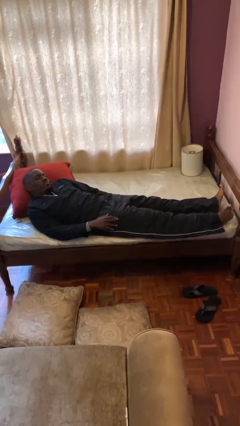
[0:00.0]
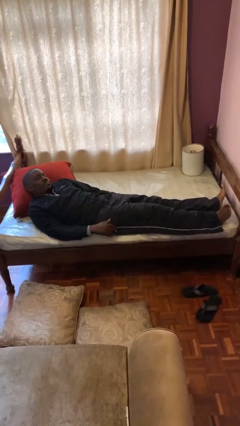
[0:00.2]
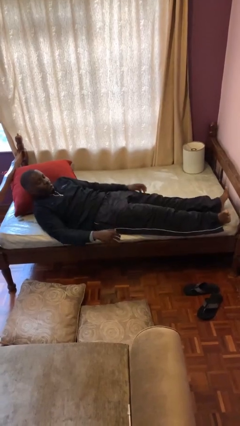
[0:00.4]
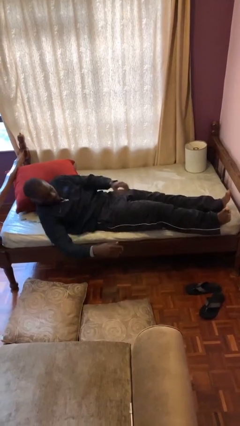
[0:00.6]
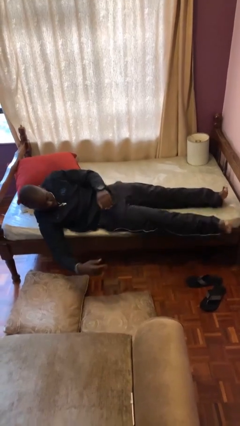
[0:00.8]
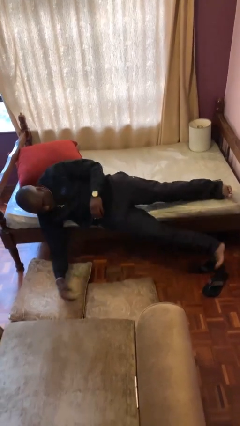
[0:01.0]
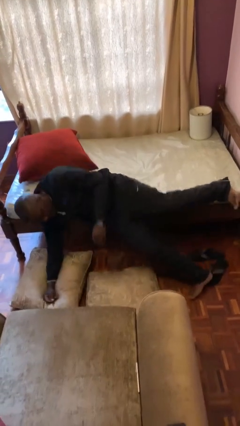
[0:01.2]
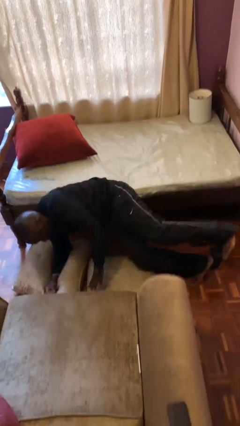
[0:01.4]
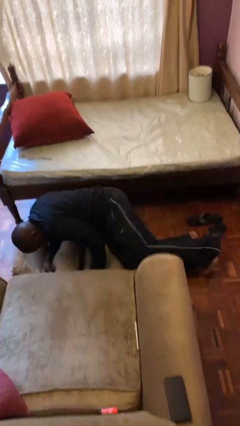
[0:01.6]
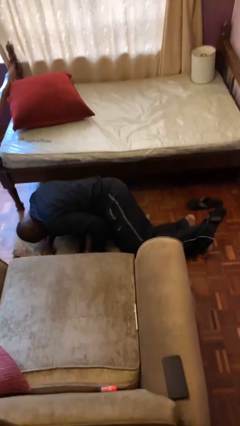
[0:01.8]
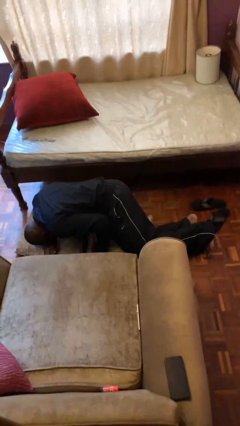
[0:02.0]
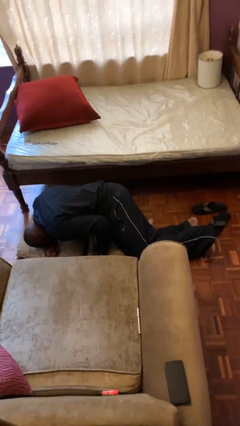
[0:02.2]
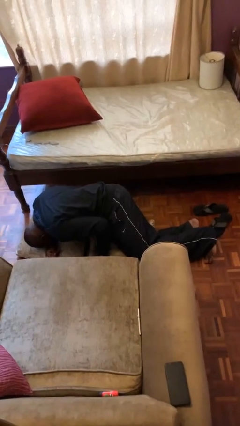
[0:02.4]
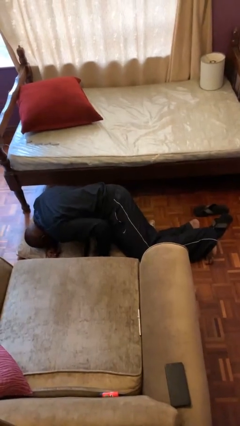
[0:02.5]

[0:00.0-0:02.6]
person falls from bed

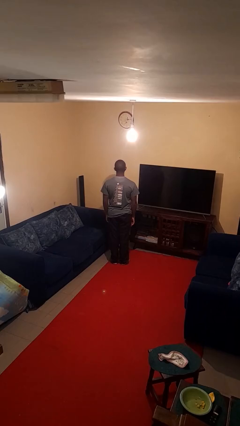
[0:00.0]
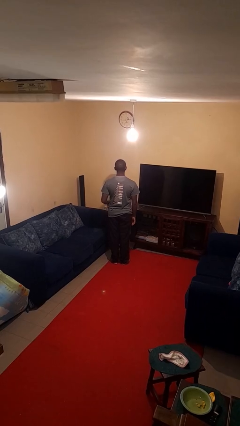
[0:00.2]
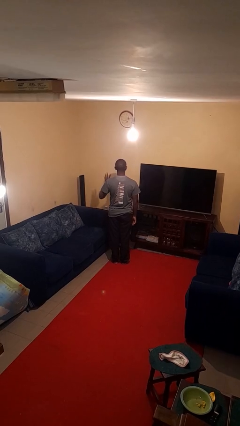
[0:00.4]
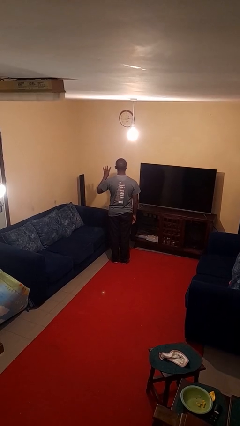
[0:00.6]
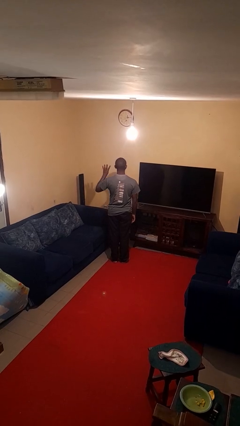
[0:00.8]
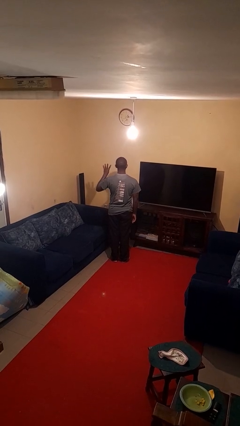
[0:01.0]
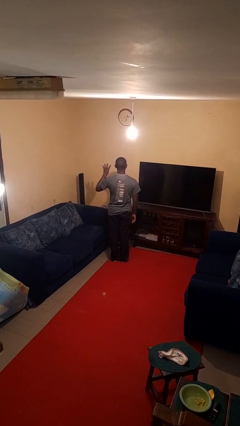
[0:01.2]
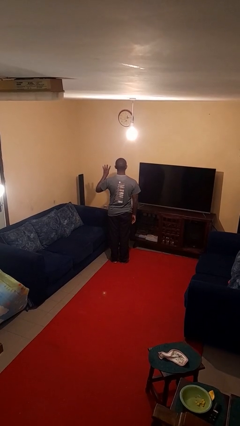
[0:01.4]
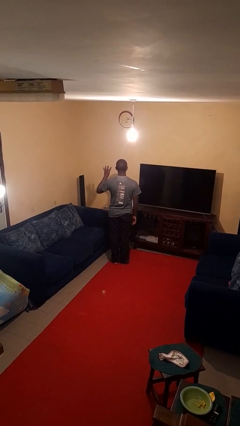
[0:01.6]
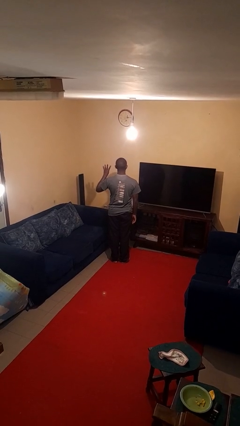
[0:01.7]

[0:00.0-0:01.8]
person gestures number four

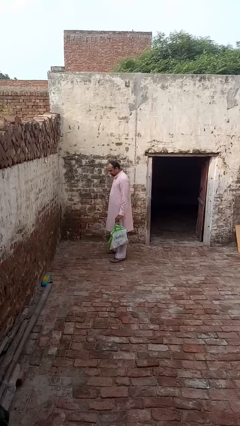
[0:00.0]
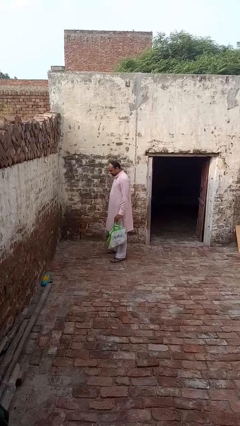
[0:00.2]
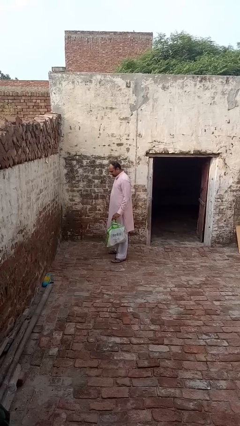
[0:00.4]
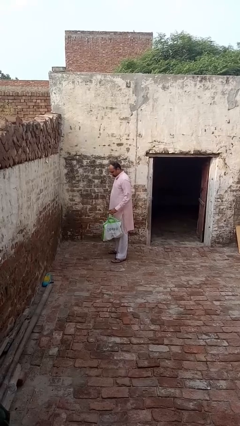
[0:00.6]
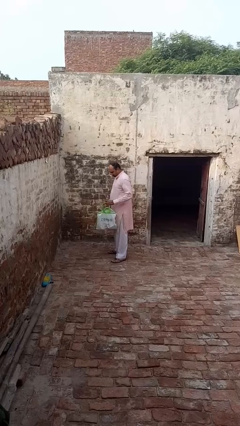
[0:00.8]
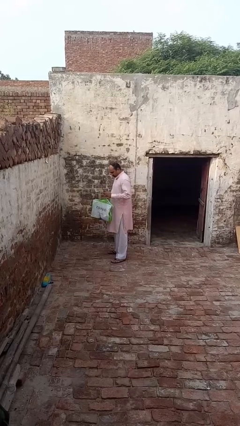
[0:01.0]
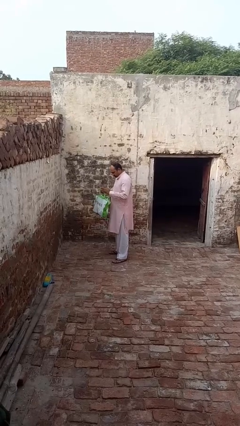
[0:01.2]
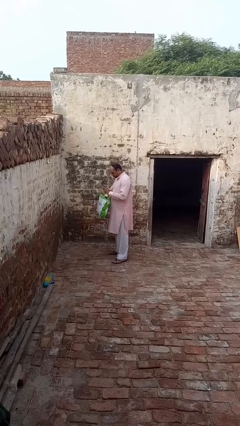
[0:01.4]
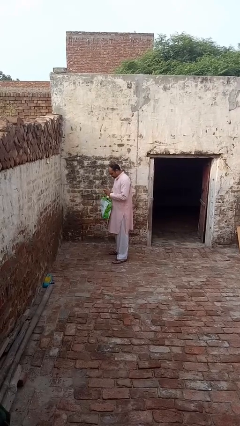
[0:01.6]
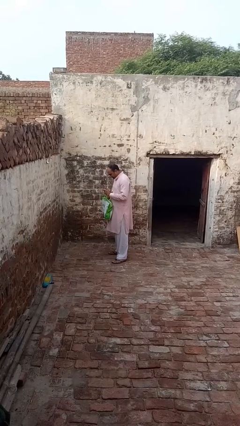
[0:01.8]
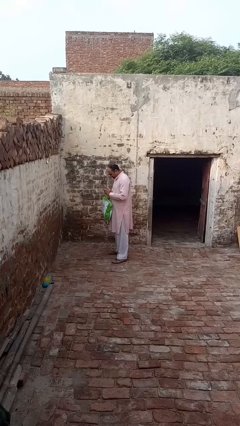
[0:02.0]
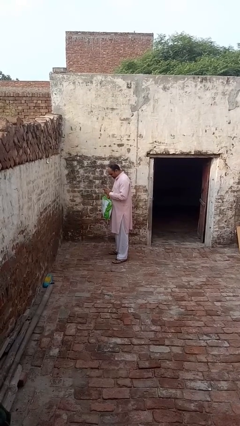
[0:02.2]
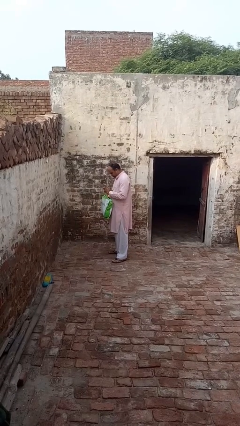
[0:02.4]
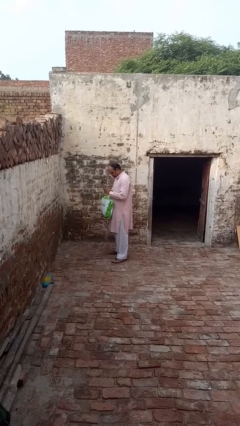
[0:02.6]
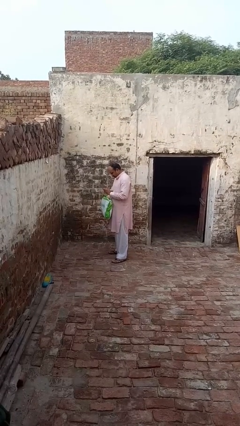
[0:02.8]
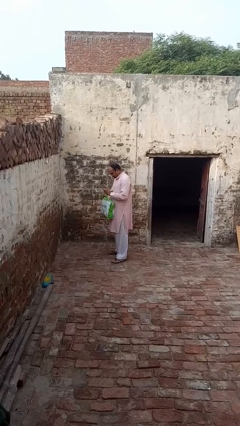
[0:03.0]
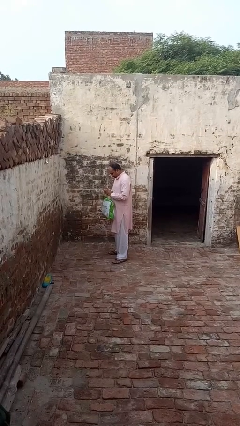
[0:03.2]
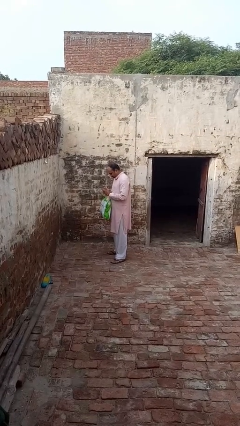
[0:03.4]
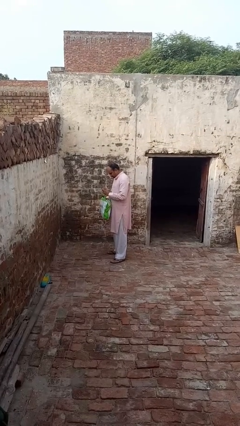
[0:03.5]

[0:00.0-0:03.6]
person searches in bag

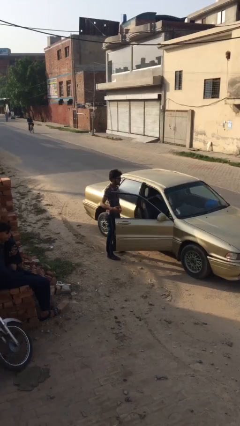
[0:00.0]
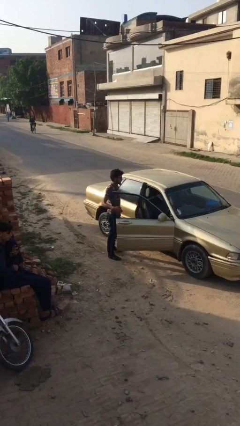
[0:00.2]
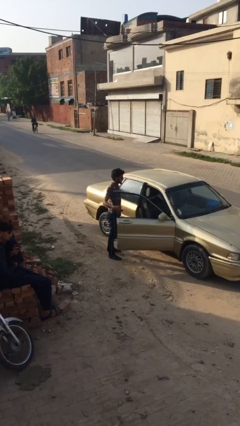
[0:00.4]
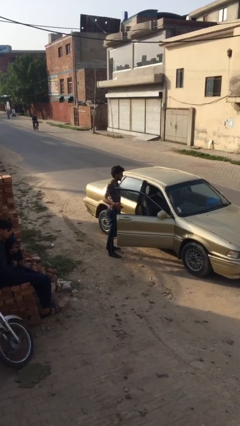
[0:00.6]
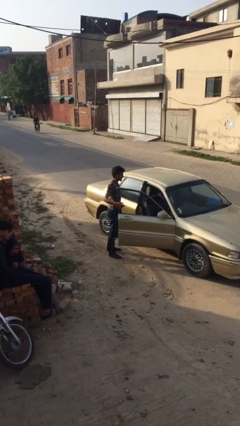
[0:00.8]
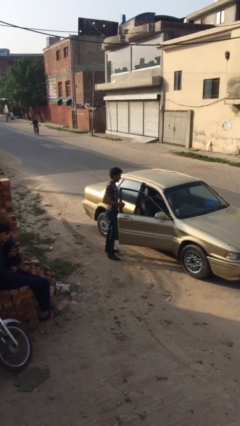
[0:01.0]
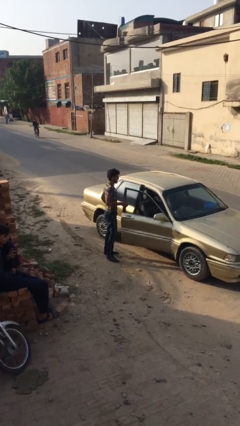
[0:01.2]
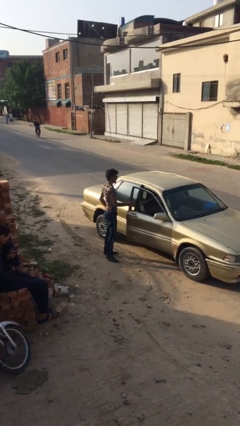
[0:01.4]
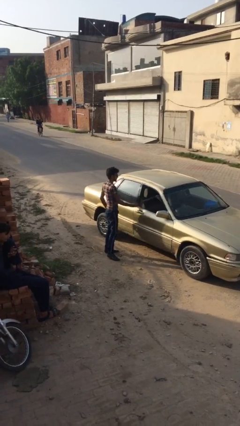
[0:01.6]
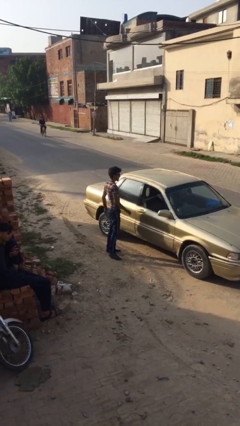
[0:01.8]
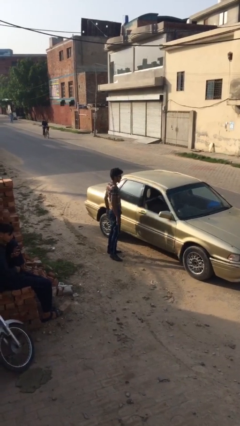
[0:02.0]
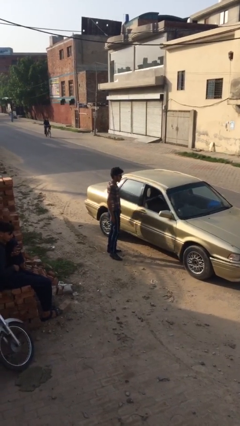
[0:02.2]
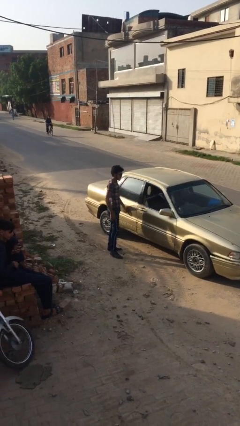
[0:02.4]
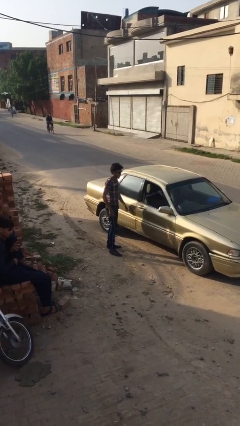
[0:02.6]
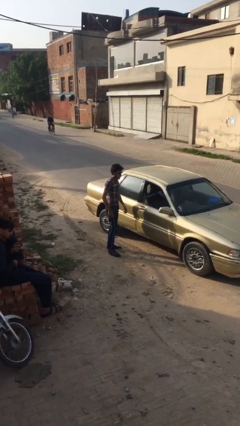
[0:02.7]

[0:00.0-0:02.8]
person closes car door

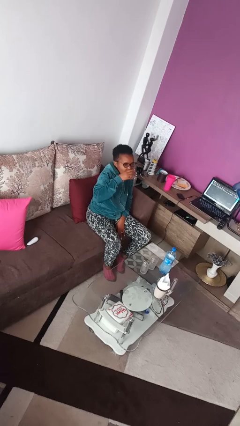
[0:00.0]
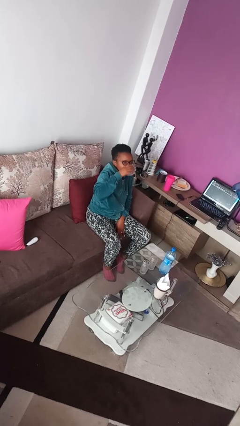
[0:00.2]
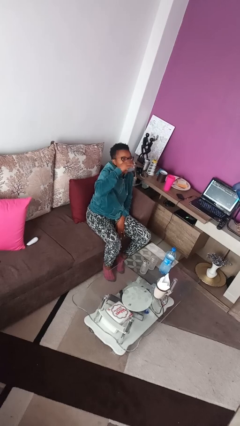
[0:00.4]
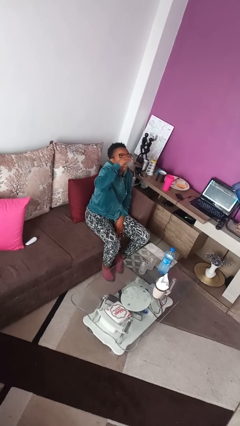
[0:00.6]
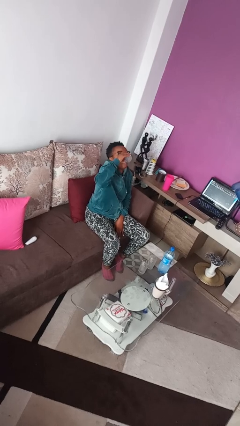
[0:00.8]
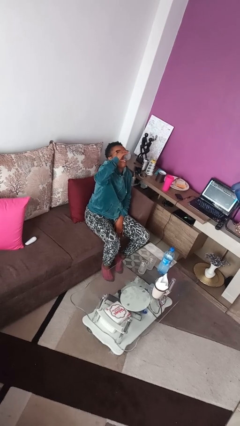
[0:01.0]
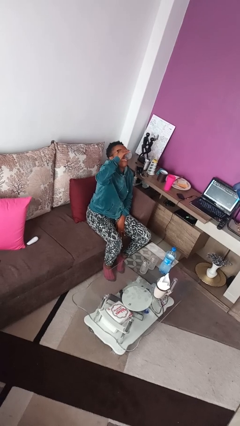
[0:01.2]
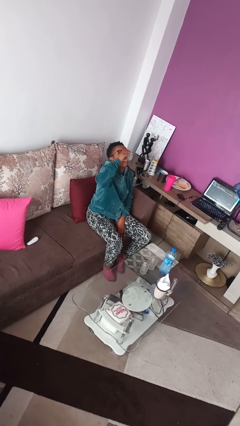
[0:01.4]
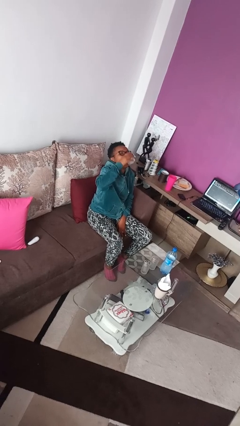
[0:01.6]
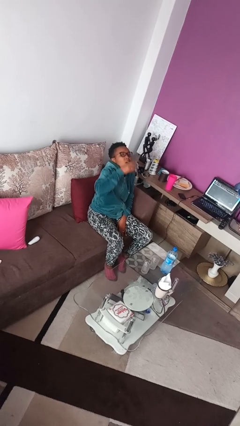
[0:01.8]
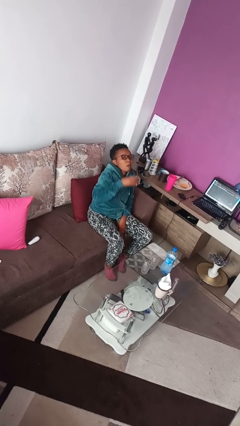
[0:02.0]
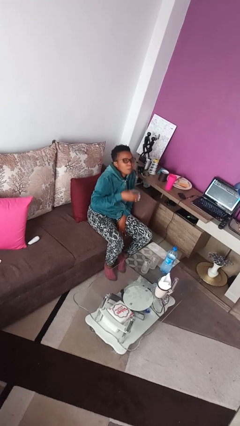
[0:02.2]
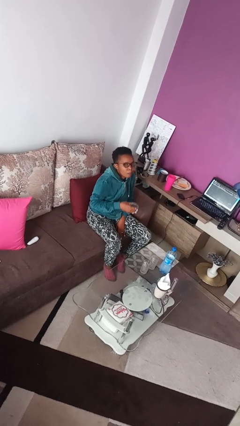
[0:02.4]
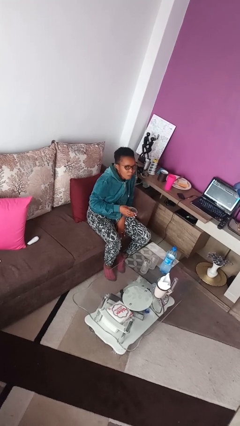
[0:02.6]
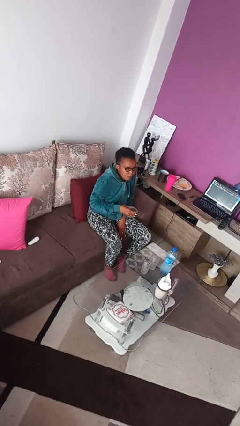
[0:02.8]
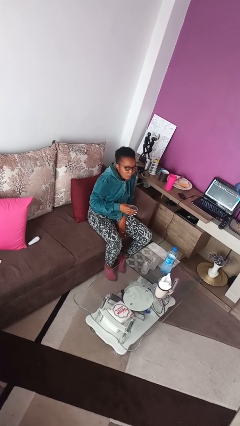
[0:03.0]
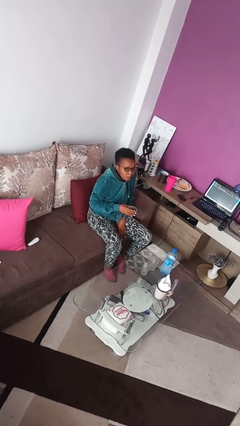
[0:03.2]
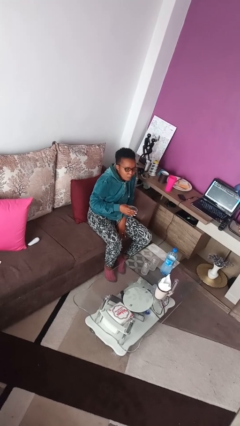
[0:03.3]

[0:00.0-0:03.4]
person drinks from shotglass

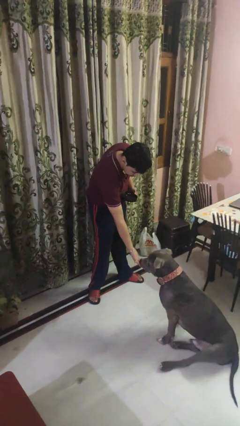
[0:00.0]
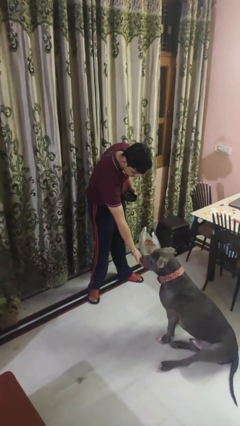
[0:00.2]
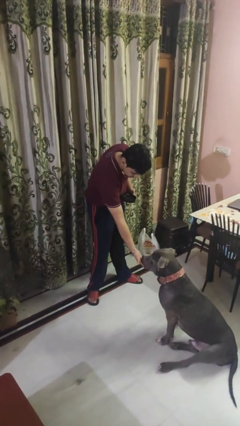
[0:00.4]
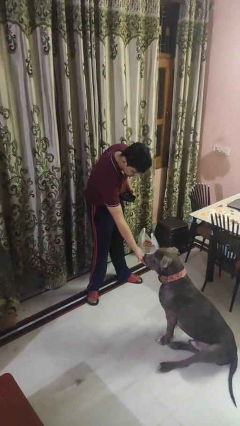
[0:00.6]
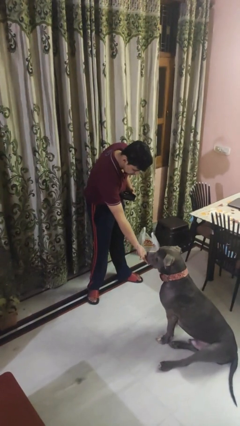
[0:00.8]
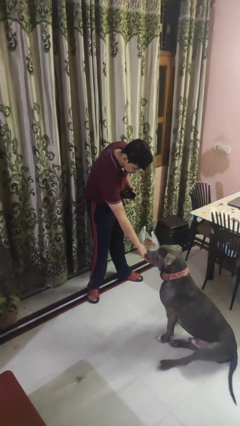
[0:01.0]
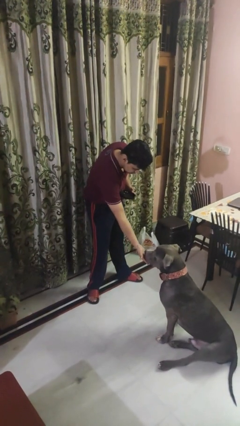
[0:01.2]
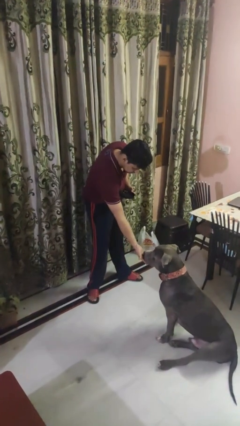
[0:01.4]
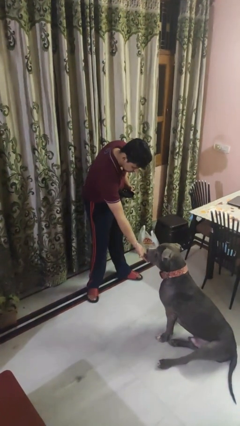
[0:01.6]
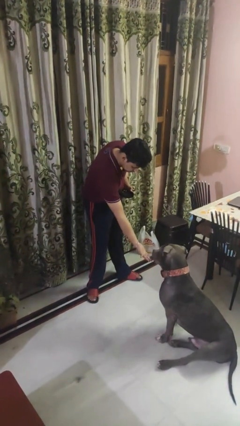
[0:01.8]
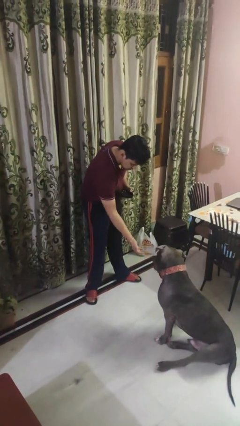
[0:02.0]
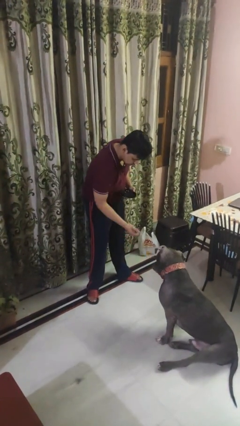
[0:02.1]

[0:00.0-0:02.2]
person feeds dog

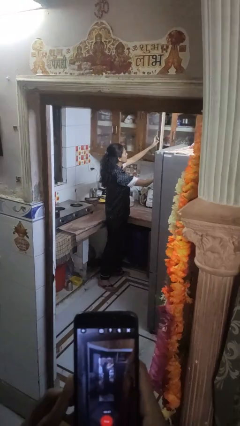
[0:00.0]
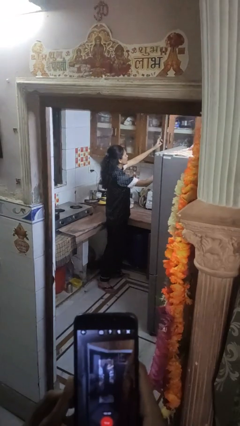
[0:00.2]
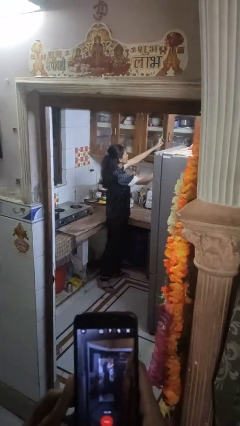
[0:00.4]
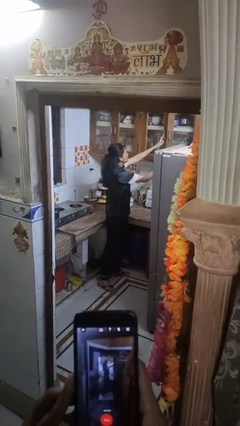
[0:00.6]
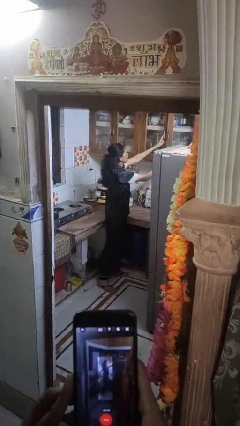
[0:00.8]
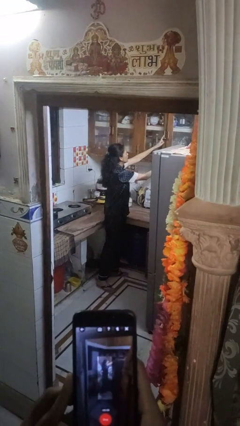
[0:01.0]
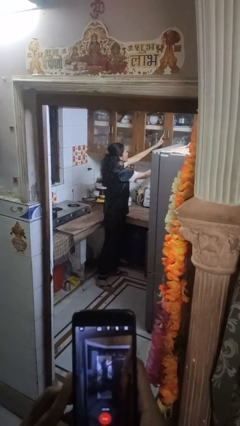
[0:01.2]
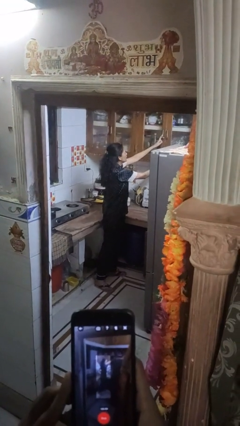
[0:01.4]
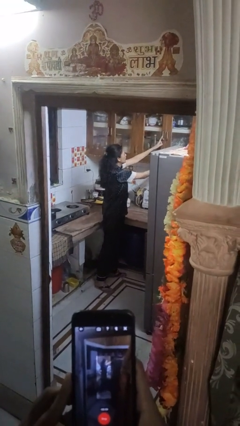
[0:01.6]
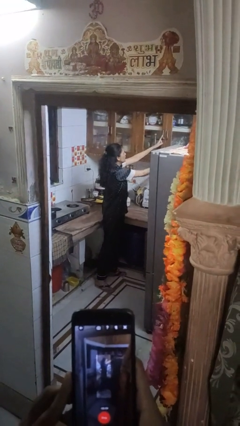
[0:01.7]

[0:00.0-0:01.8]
person closes cabinet
